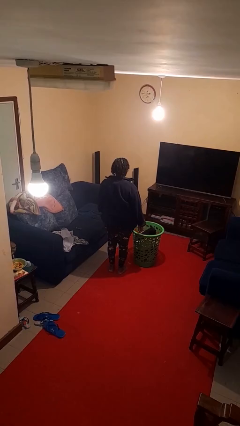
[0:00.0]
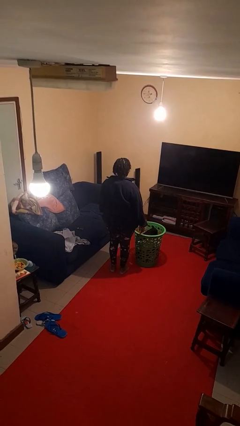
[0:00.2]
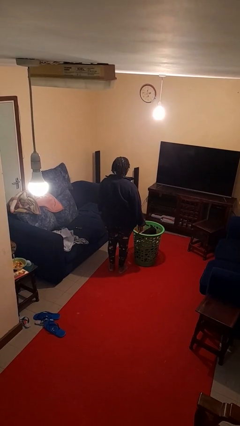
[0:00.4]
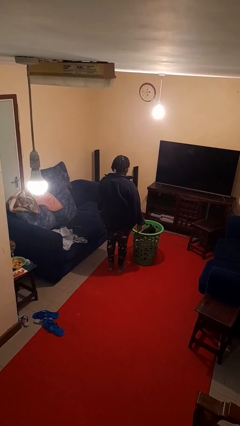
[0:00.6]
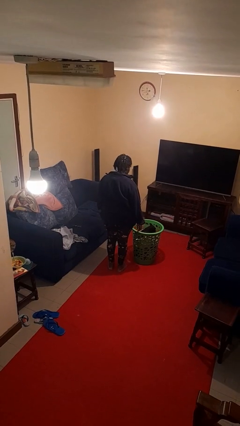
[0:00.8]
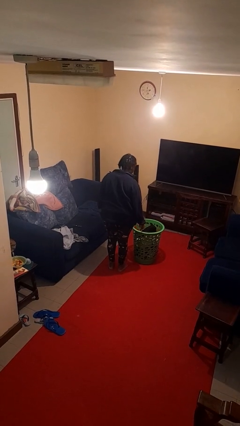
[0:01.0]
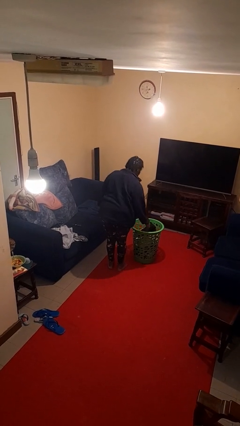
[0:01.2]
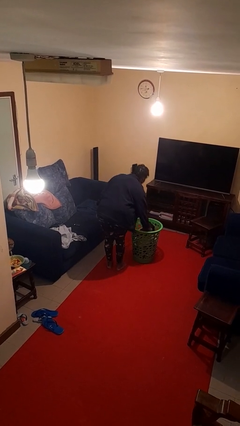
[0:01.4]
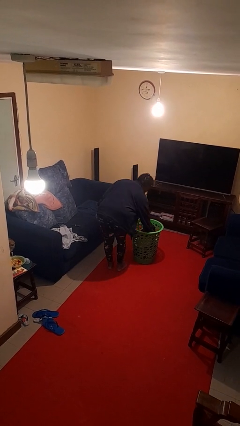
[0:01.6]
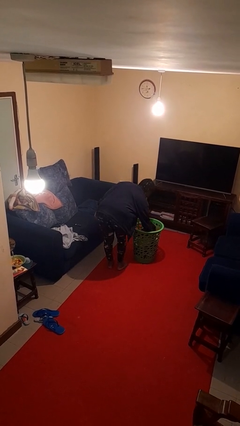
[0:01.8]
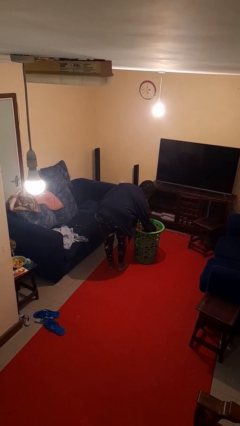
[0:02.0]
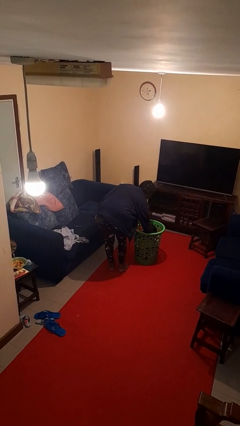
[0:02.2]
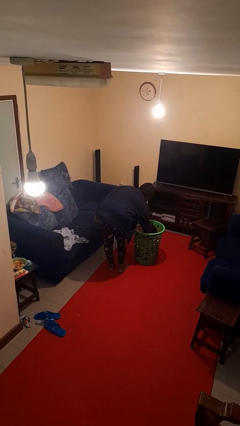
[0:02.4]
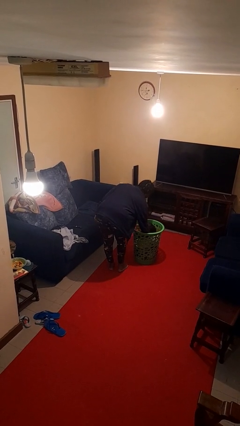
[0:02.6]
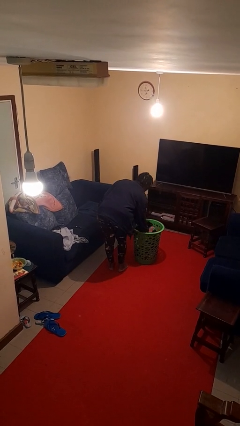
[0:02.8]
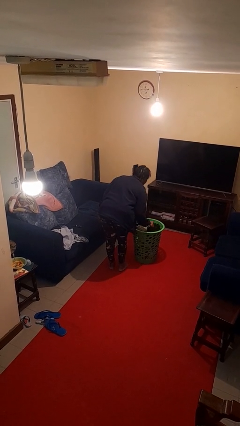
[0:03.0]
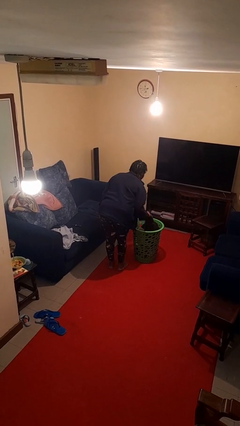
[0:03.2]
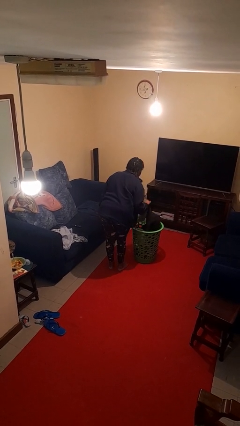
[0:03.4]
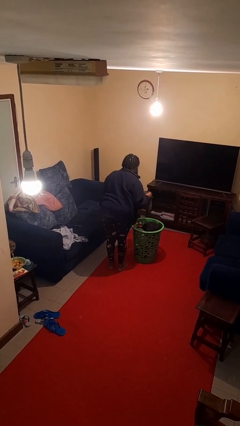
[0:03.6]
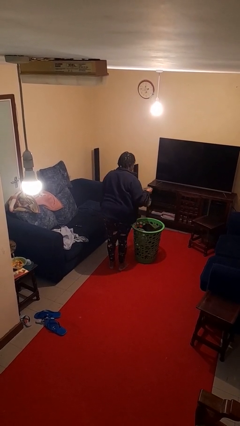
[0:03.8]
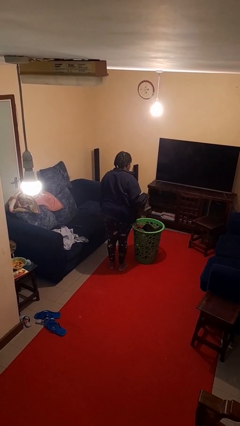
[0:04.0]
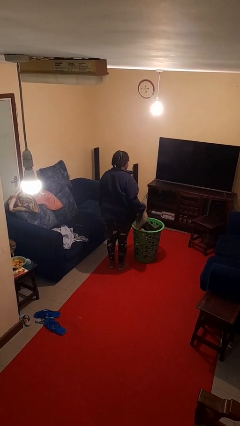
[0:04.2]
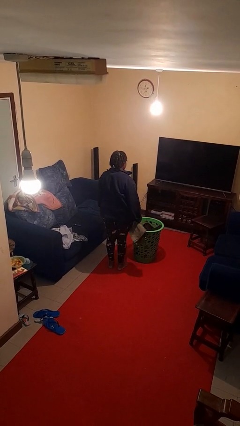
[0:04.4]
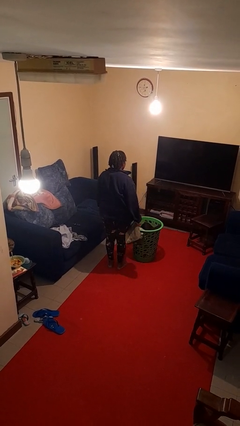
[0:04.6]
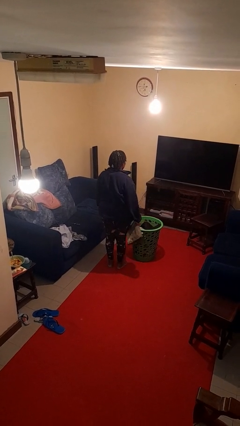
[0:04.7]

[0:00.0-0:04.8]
person takes object from basket

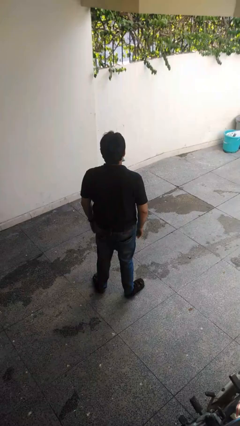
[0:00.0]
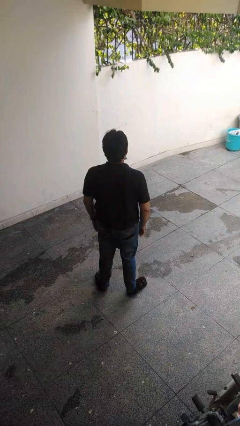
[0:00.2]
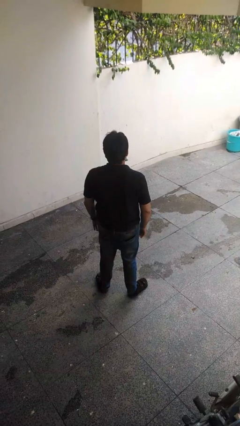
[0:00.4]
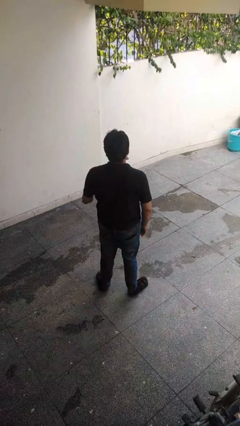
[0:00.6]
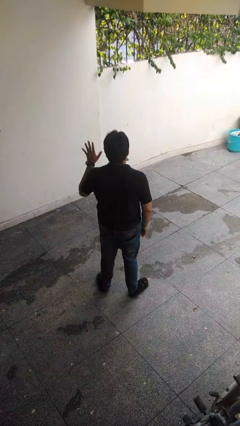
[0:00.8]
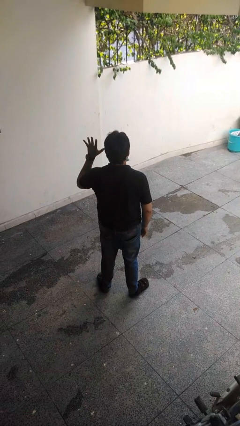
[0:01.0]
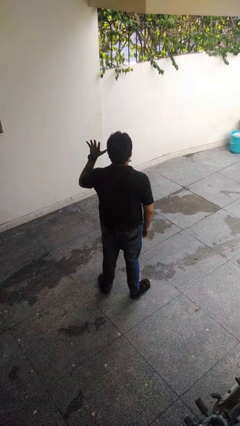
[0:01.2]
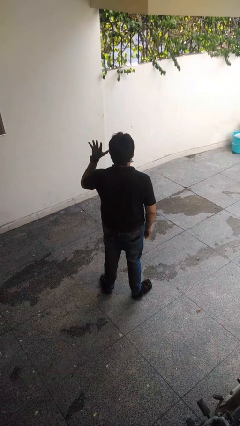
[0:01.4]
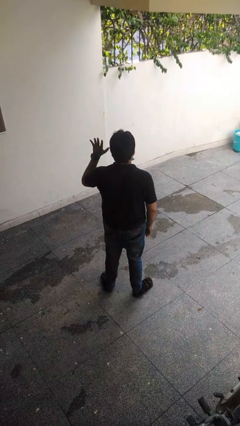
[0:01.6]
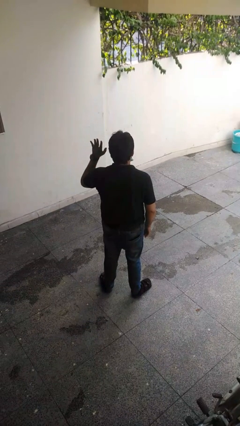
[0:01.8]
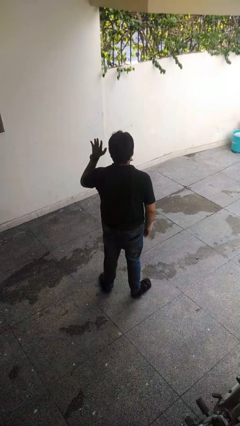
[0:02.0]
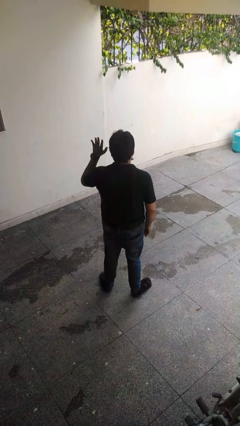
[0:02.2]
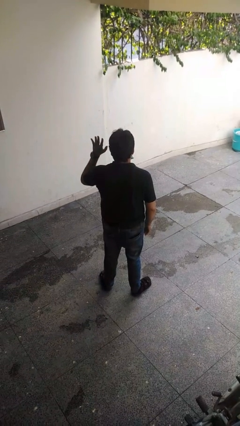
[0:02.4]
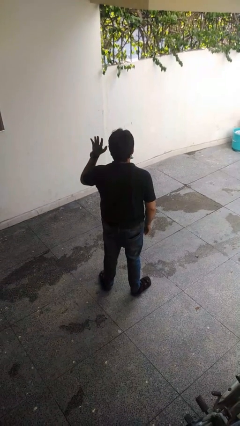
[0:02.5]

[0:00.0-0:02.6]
person gestures number five

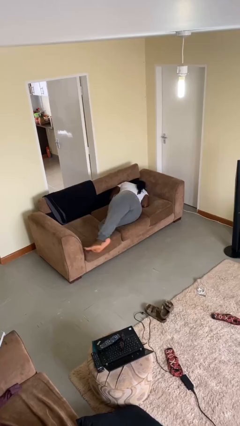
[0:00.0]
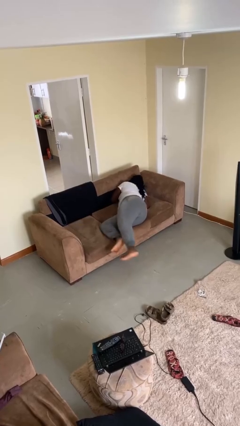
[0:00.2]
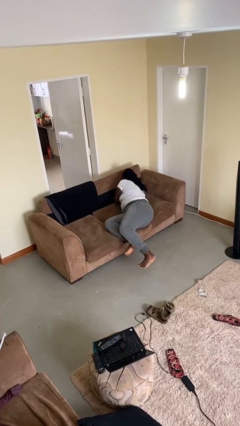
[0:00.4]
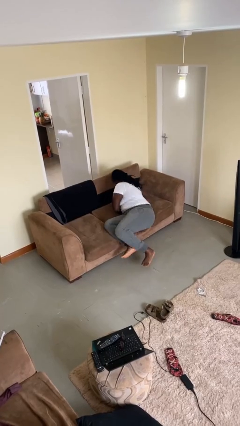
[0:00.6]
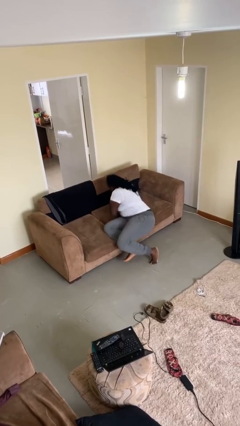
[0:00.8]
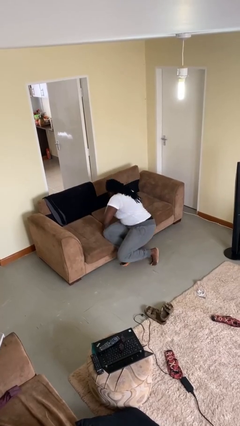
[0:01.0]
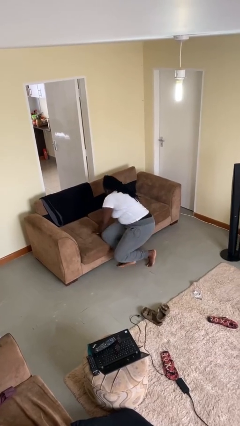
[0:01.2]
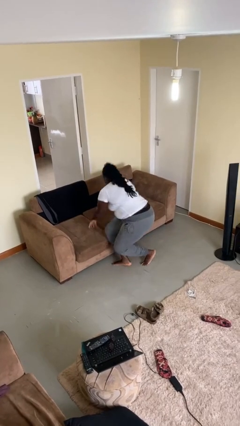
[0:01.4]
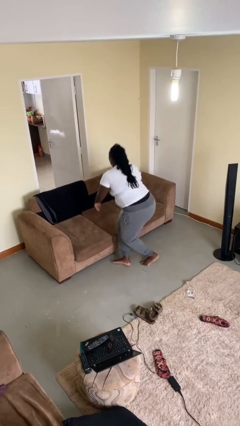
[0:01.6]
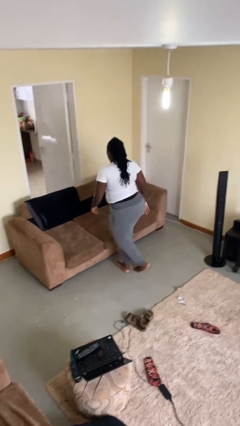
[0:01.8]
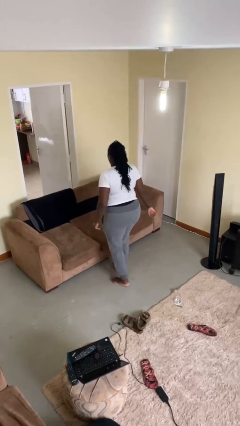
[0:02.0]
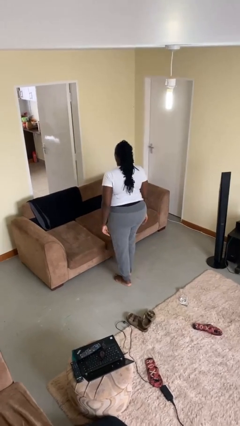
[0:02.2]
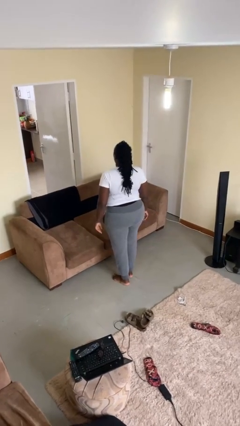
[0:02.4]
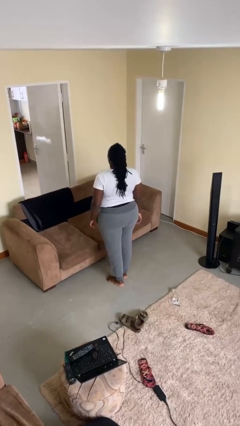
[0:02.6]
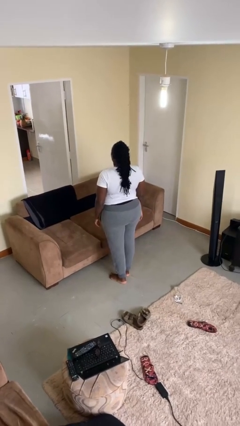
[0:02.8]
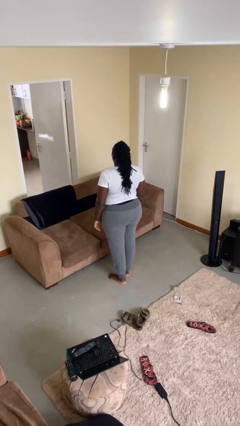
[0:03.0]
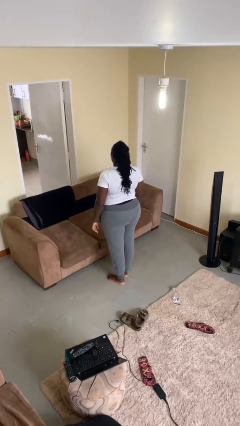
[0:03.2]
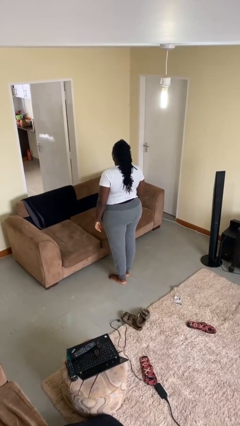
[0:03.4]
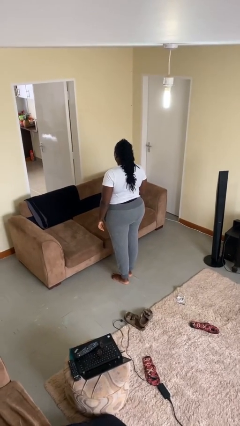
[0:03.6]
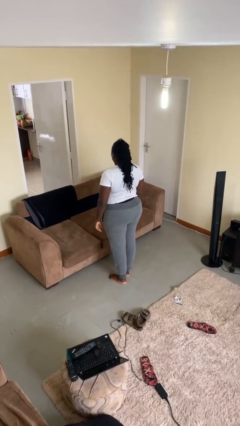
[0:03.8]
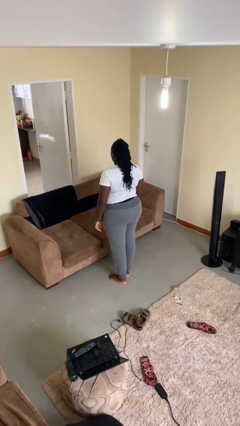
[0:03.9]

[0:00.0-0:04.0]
person stands up

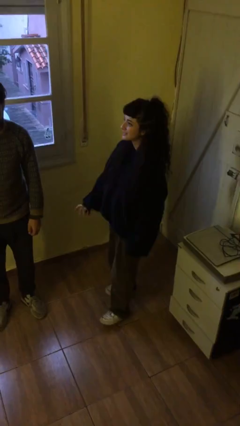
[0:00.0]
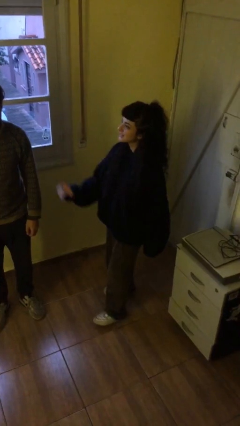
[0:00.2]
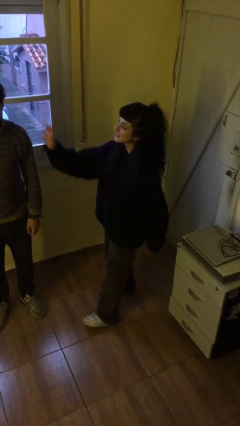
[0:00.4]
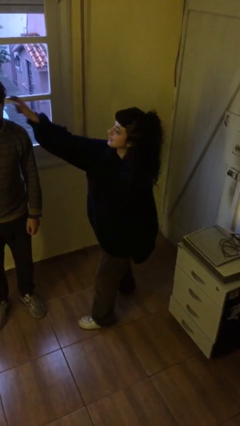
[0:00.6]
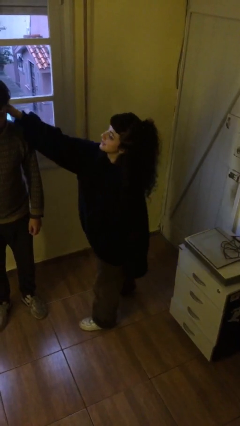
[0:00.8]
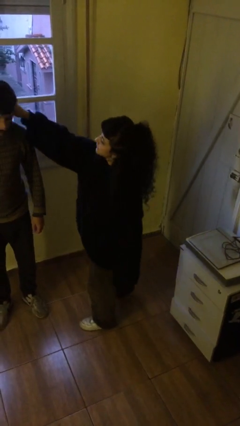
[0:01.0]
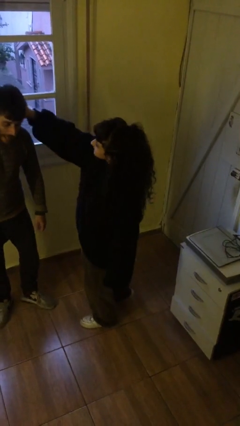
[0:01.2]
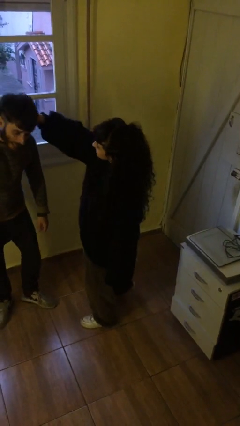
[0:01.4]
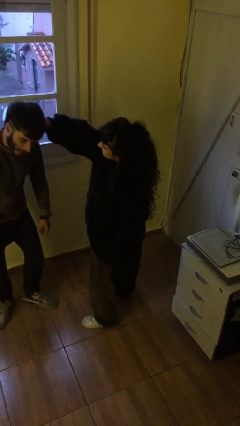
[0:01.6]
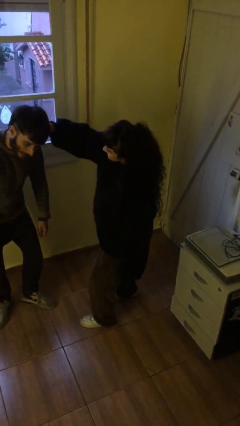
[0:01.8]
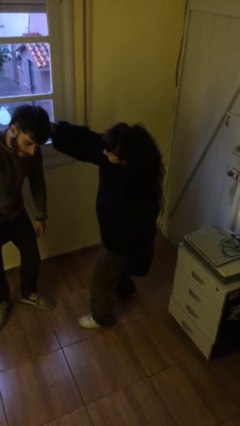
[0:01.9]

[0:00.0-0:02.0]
person grabs person by hair

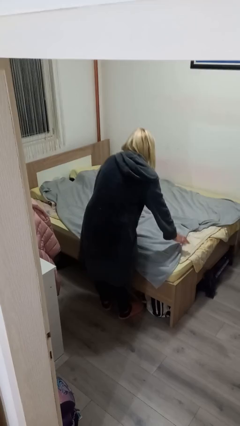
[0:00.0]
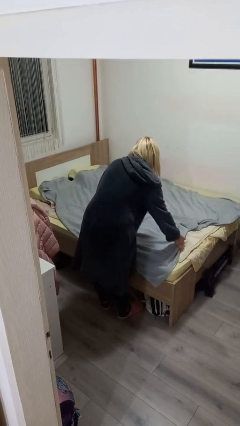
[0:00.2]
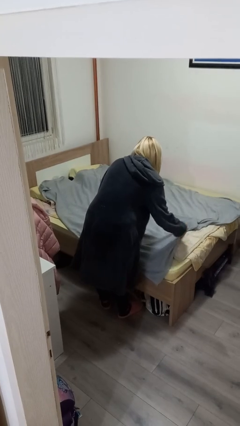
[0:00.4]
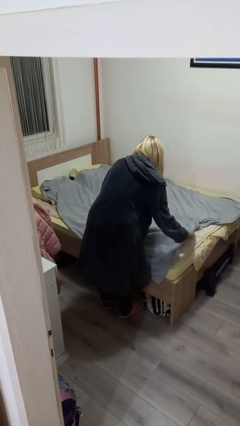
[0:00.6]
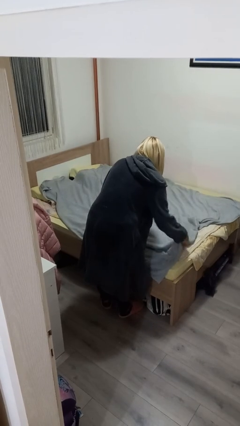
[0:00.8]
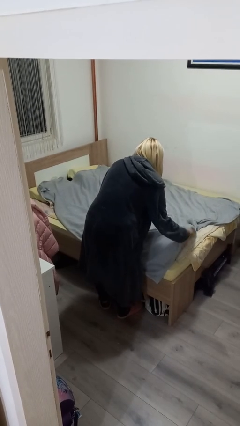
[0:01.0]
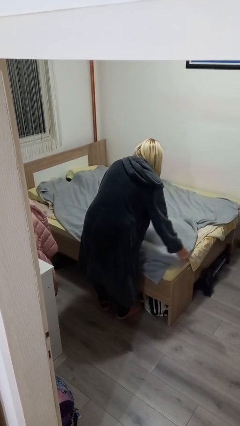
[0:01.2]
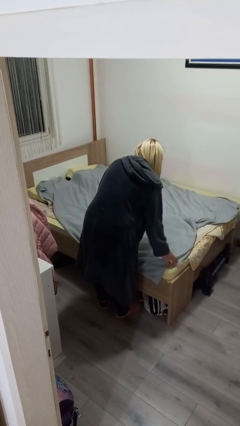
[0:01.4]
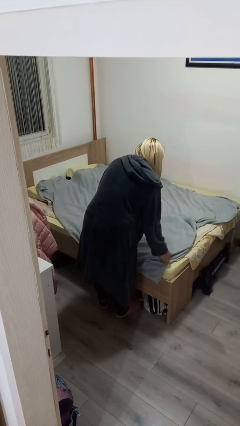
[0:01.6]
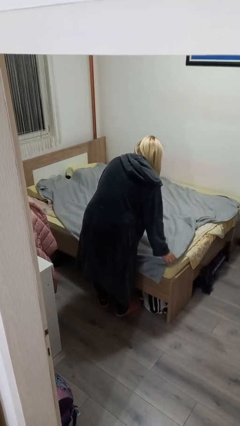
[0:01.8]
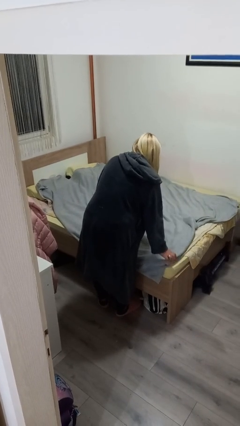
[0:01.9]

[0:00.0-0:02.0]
person makes bed

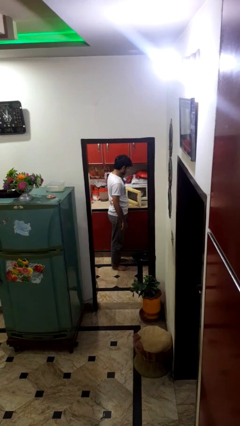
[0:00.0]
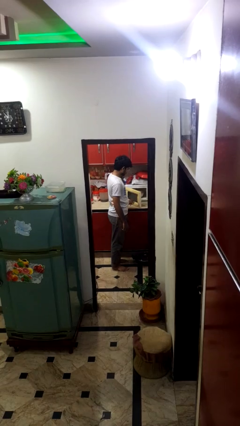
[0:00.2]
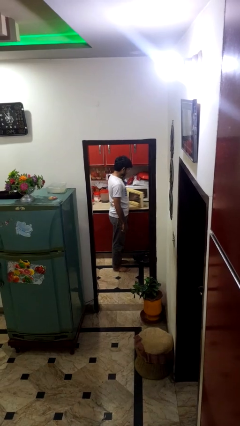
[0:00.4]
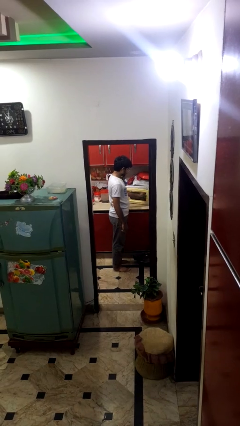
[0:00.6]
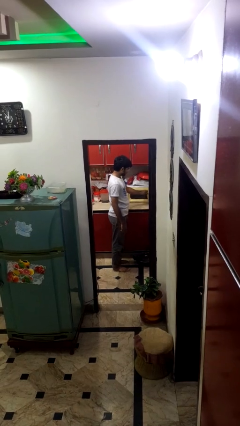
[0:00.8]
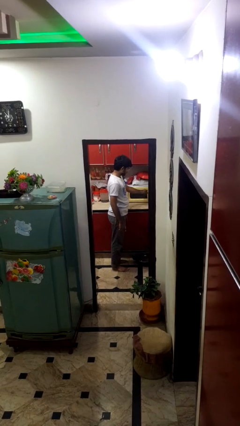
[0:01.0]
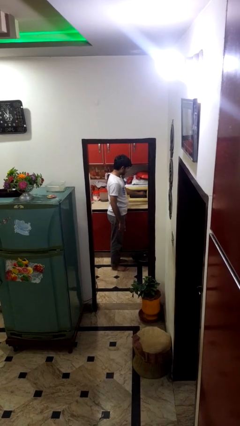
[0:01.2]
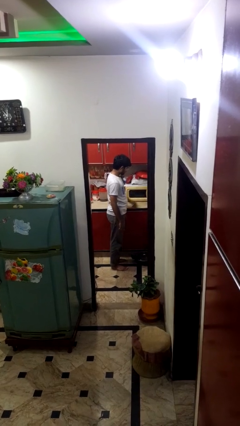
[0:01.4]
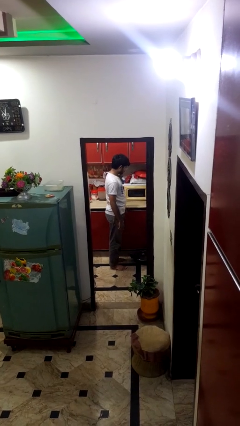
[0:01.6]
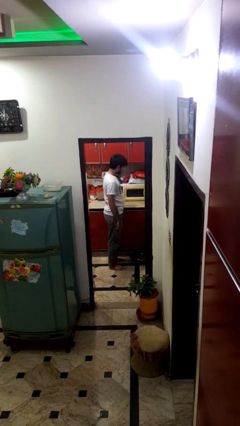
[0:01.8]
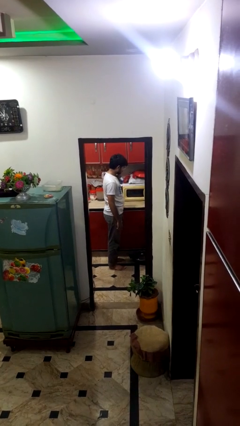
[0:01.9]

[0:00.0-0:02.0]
person closes microwave
